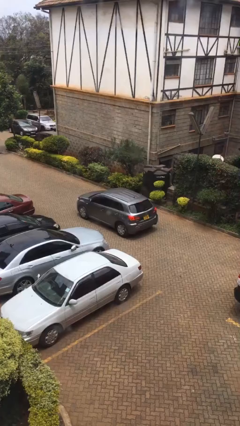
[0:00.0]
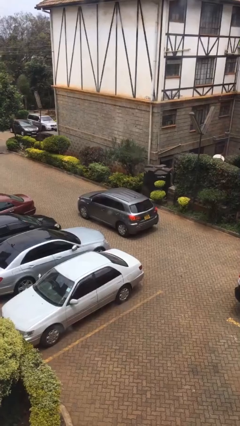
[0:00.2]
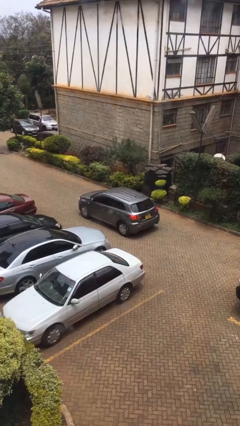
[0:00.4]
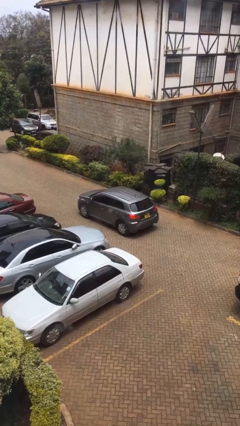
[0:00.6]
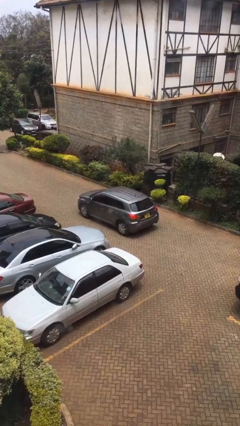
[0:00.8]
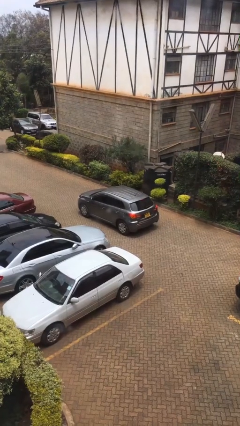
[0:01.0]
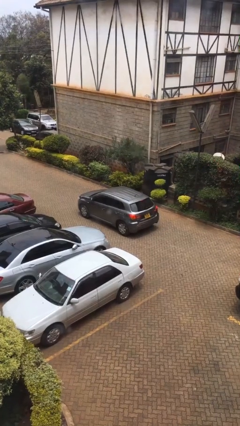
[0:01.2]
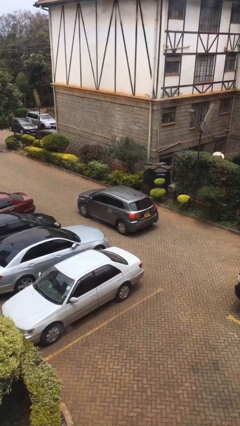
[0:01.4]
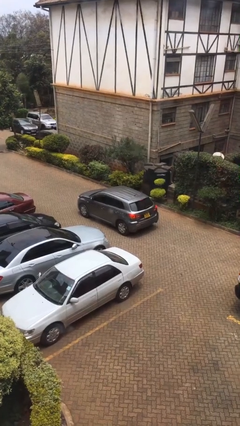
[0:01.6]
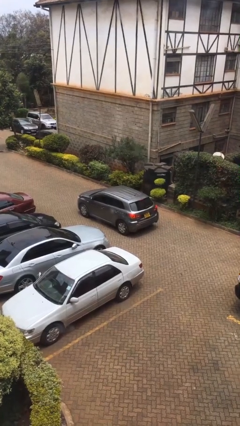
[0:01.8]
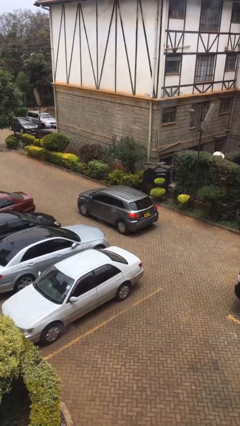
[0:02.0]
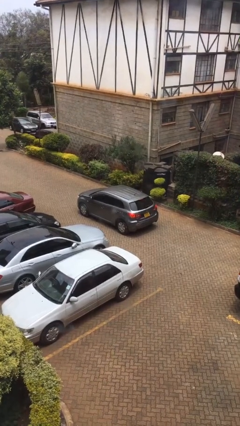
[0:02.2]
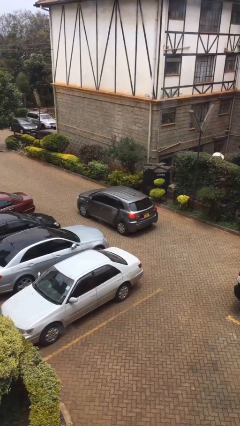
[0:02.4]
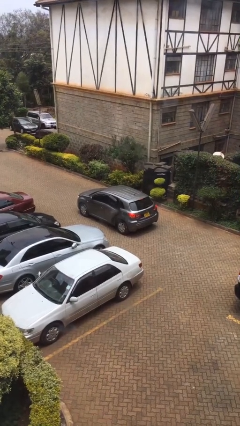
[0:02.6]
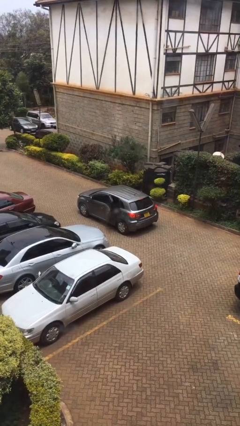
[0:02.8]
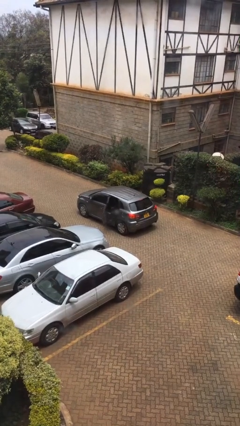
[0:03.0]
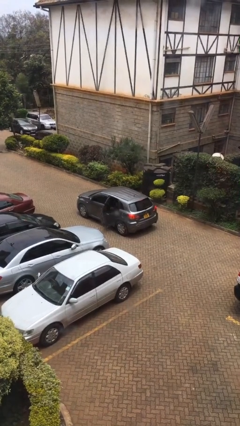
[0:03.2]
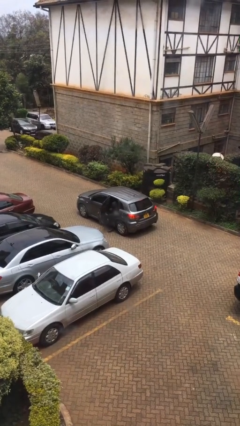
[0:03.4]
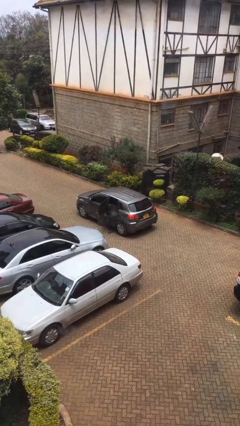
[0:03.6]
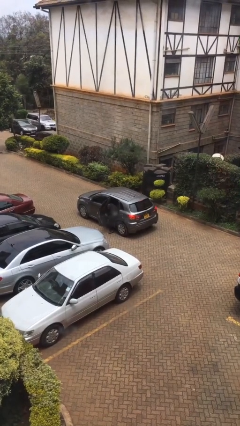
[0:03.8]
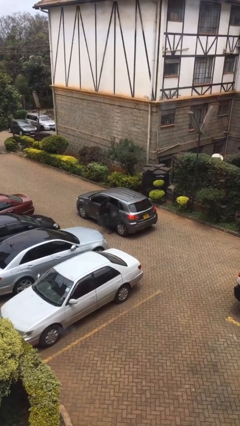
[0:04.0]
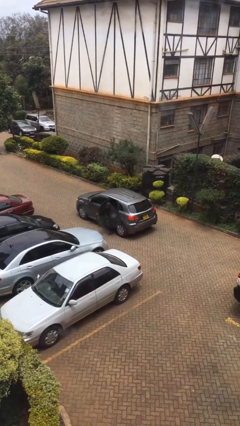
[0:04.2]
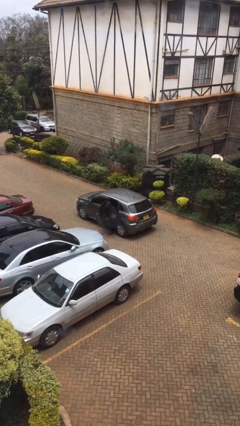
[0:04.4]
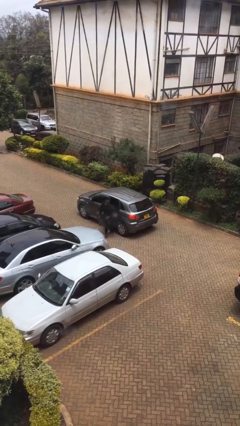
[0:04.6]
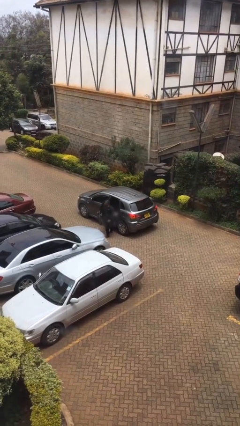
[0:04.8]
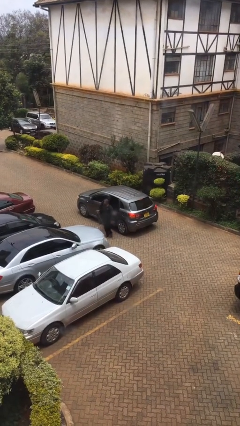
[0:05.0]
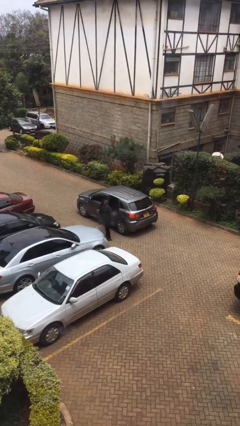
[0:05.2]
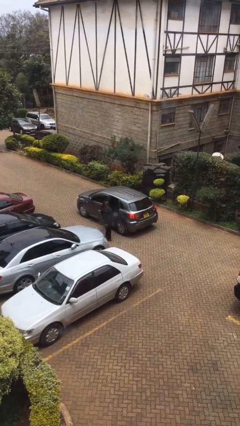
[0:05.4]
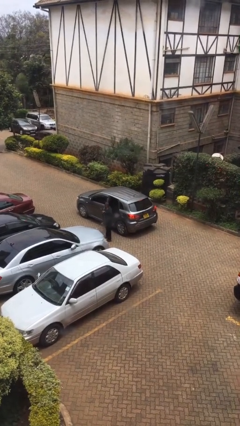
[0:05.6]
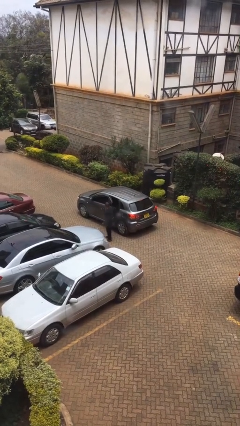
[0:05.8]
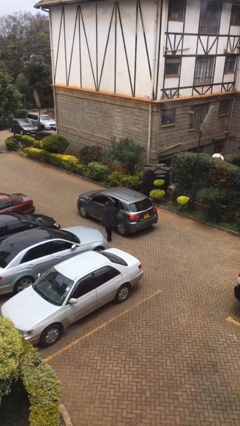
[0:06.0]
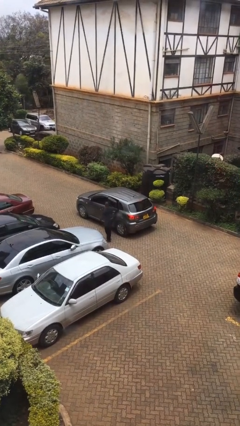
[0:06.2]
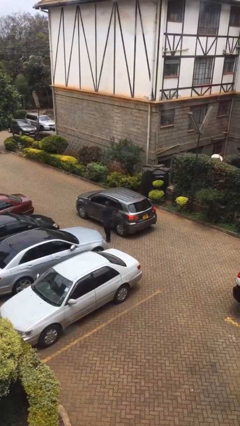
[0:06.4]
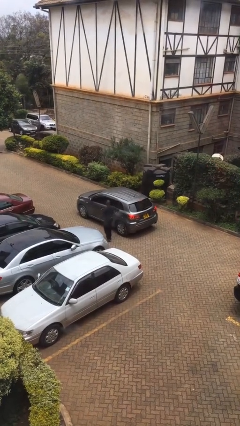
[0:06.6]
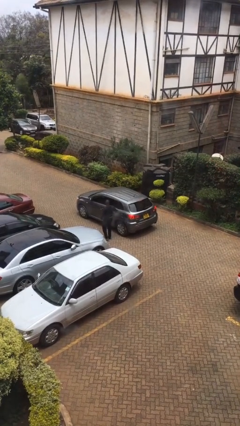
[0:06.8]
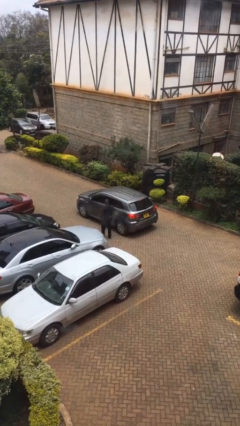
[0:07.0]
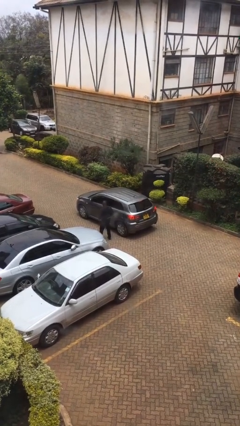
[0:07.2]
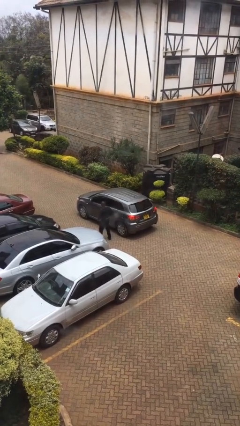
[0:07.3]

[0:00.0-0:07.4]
car picks up person

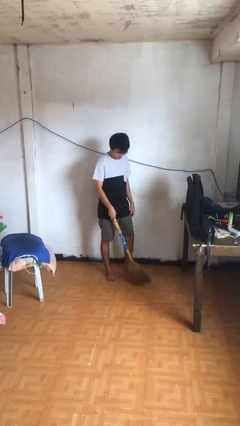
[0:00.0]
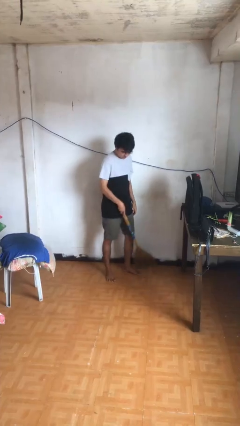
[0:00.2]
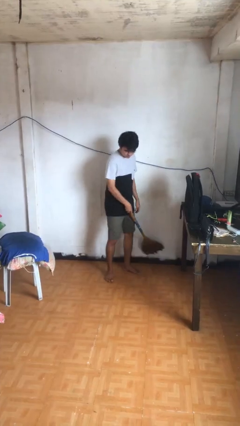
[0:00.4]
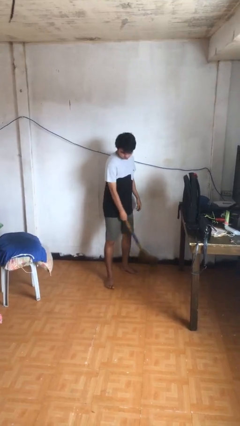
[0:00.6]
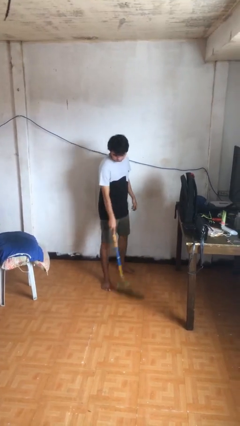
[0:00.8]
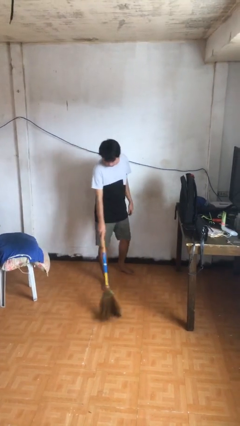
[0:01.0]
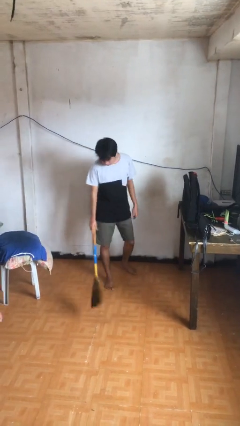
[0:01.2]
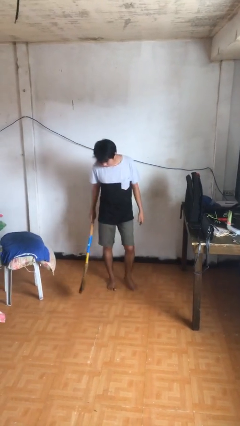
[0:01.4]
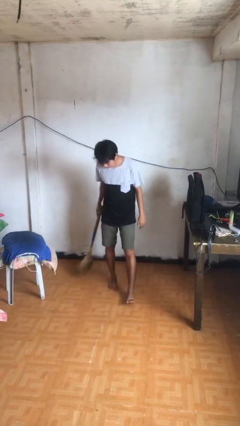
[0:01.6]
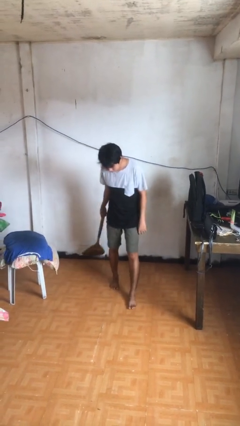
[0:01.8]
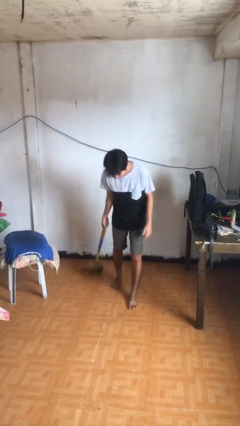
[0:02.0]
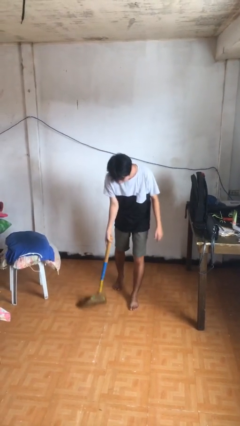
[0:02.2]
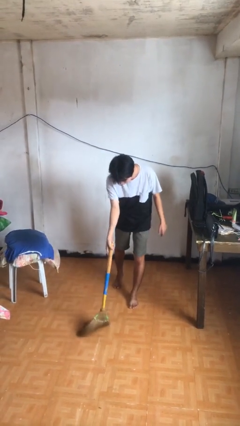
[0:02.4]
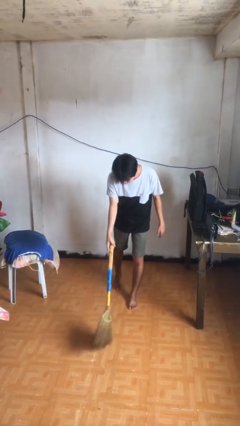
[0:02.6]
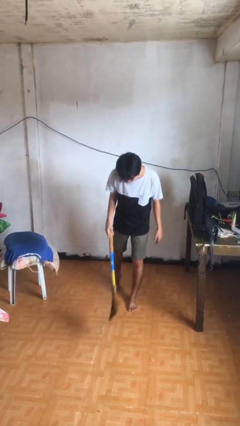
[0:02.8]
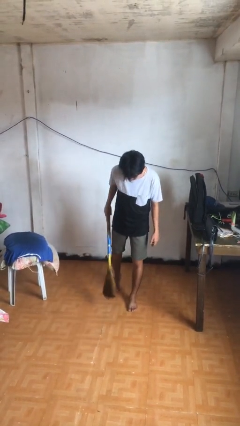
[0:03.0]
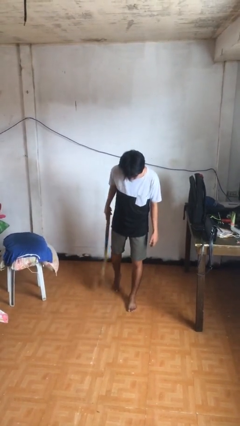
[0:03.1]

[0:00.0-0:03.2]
person sweeps floor

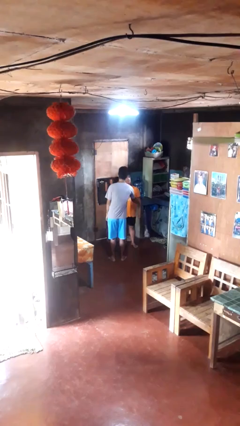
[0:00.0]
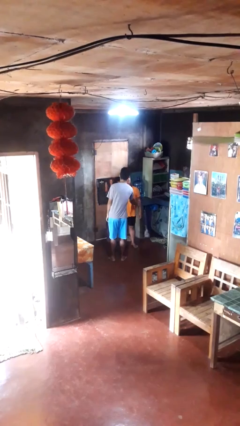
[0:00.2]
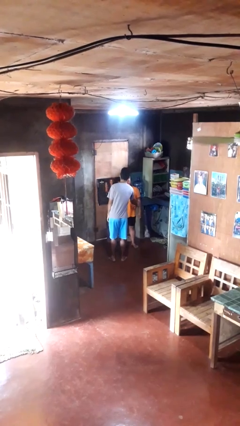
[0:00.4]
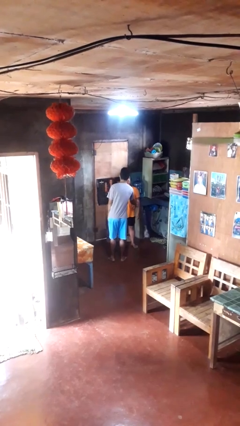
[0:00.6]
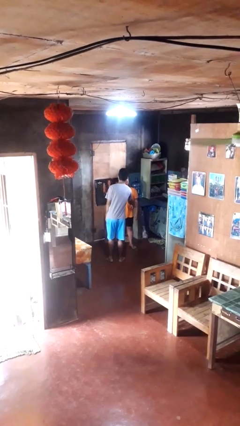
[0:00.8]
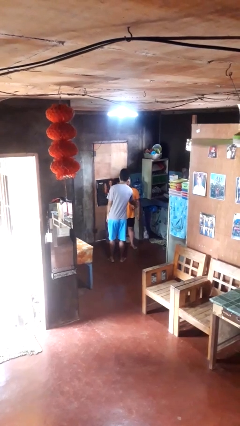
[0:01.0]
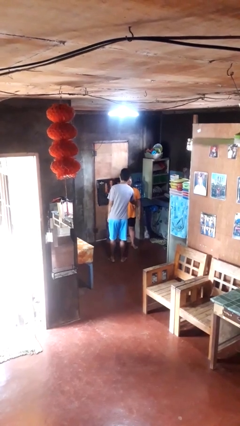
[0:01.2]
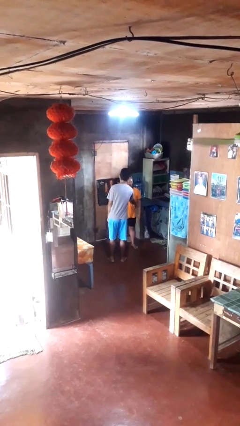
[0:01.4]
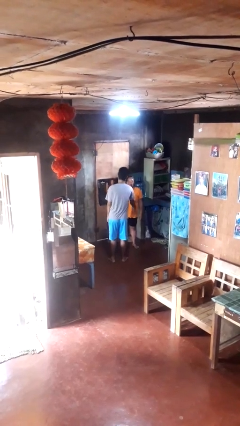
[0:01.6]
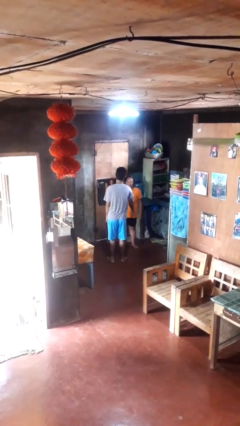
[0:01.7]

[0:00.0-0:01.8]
person tickles person

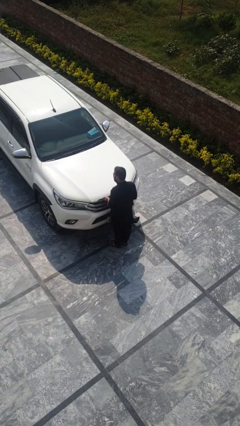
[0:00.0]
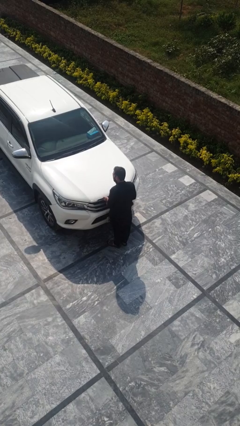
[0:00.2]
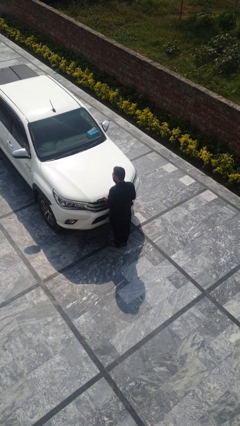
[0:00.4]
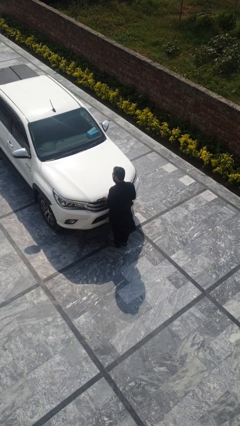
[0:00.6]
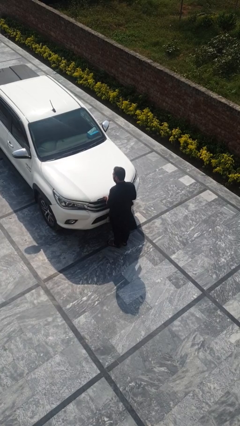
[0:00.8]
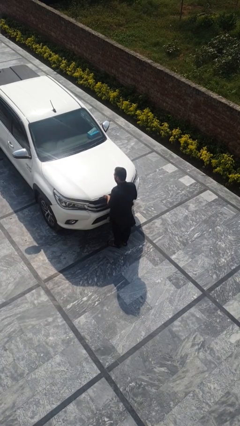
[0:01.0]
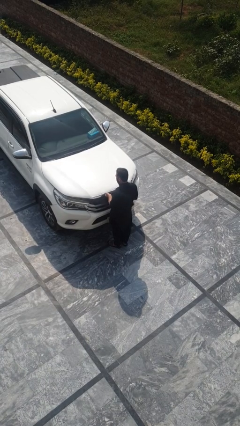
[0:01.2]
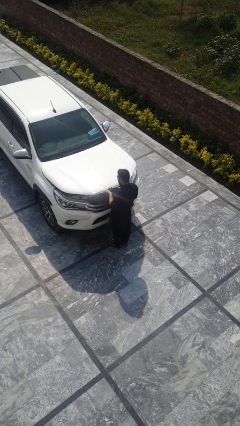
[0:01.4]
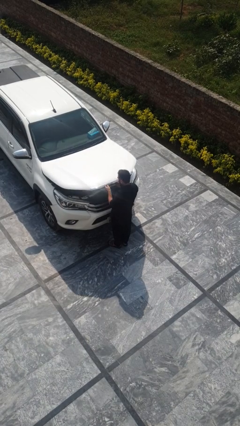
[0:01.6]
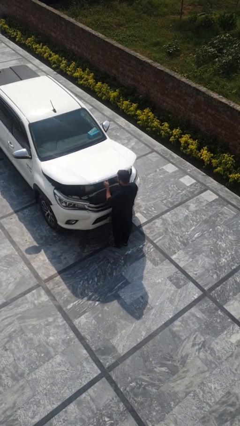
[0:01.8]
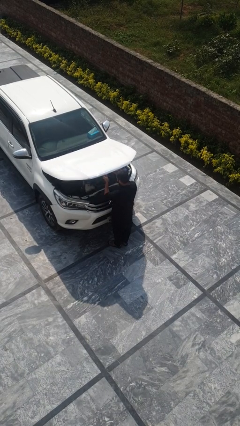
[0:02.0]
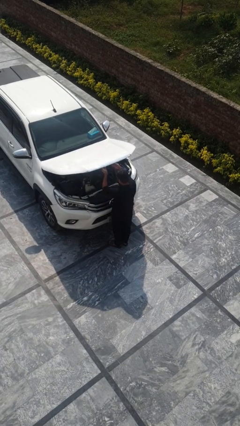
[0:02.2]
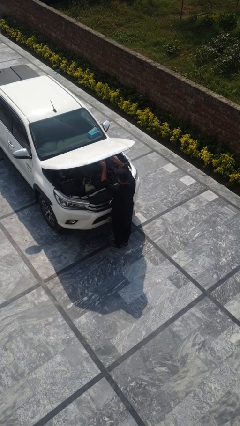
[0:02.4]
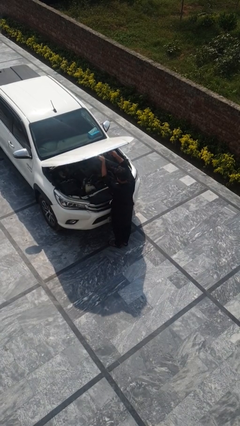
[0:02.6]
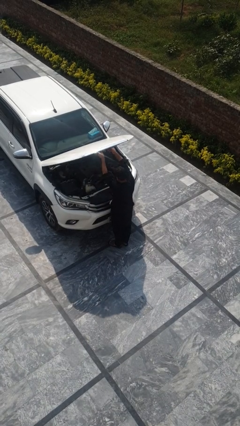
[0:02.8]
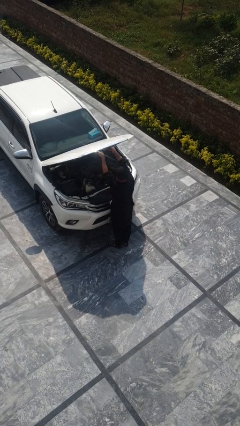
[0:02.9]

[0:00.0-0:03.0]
person opens car hood

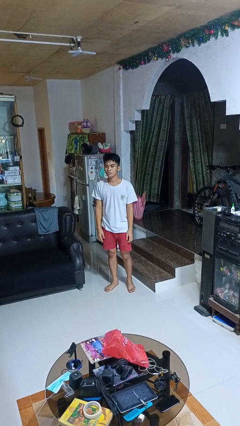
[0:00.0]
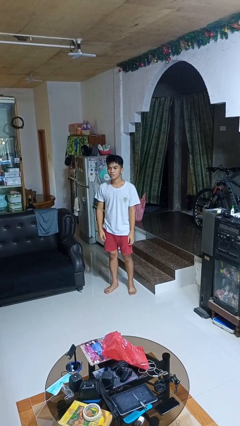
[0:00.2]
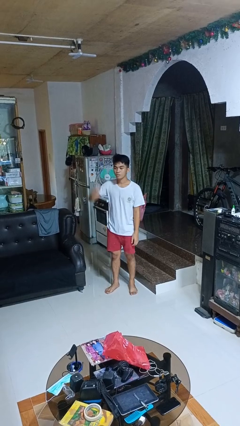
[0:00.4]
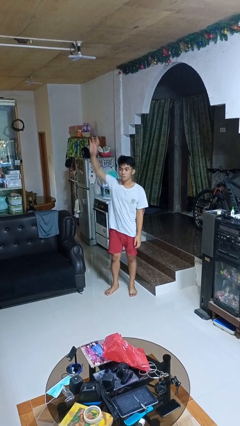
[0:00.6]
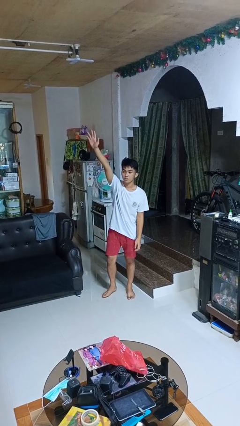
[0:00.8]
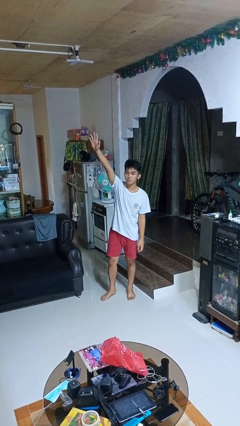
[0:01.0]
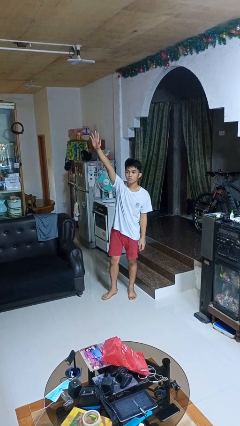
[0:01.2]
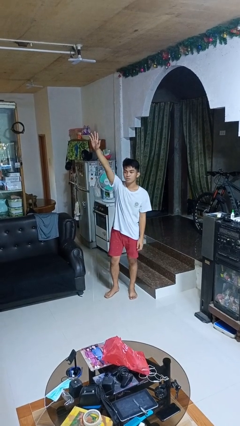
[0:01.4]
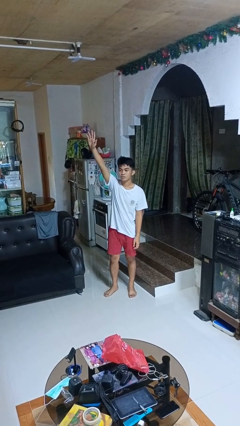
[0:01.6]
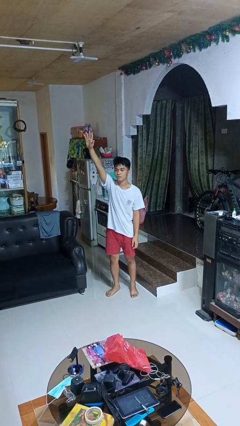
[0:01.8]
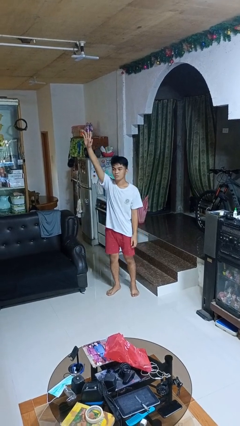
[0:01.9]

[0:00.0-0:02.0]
person gestures raise hand
